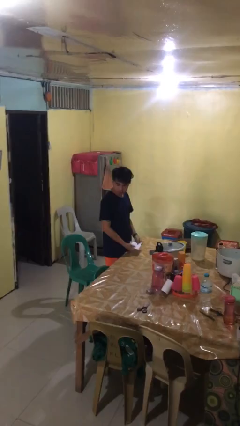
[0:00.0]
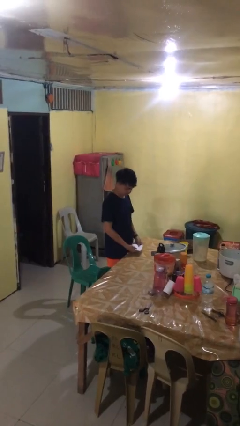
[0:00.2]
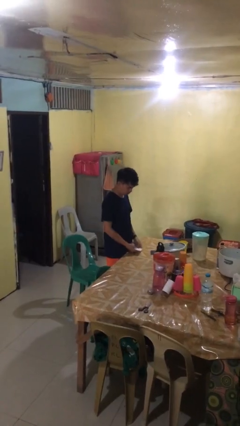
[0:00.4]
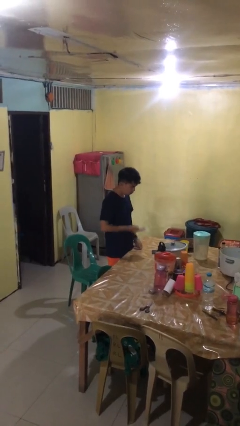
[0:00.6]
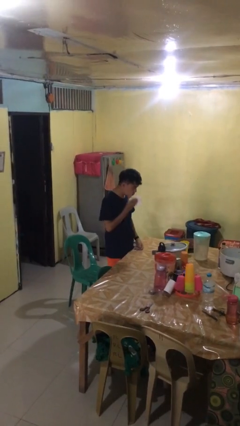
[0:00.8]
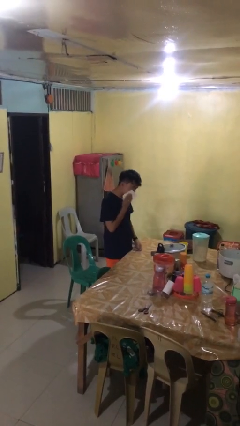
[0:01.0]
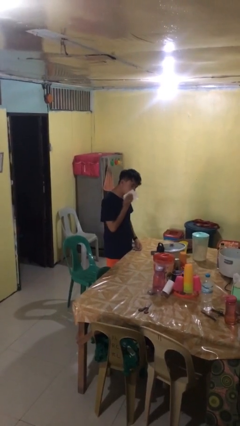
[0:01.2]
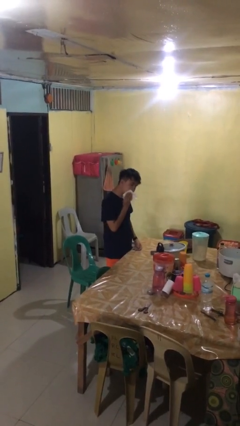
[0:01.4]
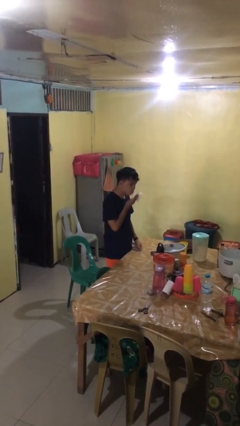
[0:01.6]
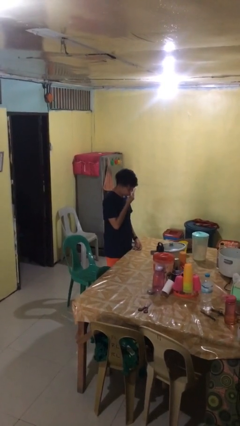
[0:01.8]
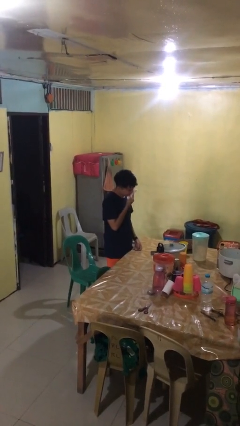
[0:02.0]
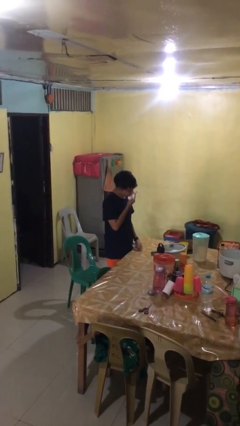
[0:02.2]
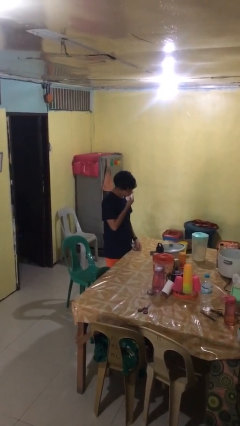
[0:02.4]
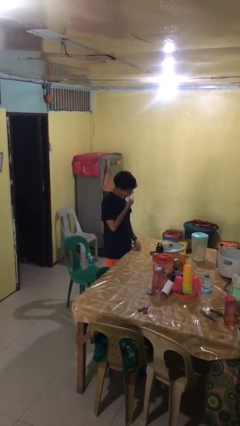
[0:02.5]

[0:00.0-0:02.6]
person wipes mouth with napkin

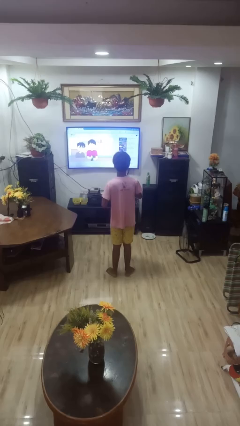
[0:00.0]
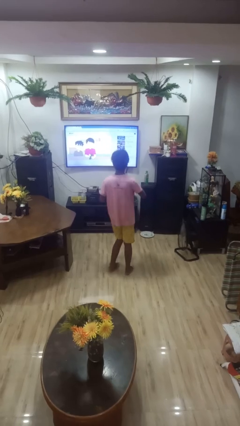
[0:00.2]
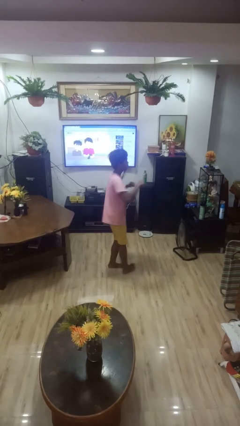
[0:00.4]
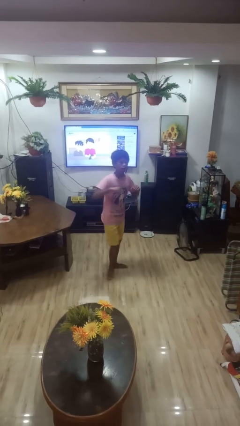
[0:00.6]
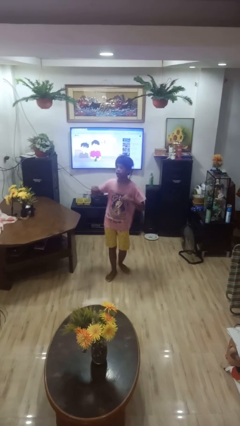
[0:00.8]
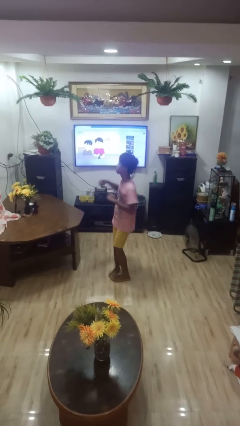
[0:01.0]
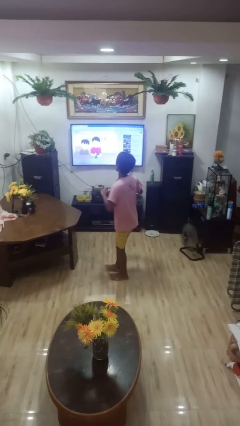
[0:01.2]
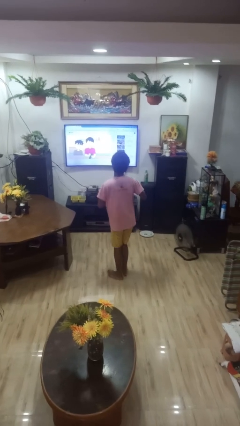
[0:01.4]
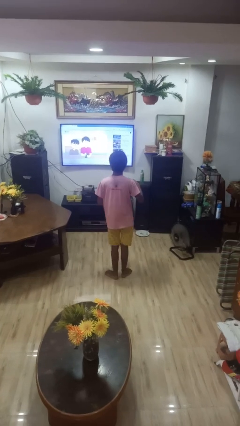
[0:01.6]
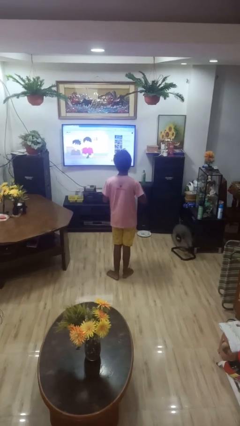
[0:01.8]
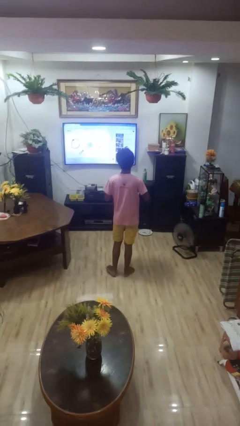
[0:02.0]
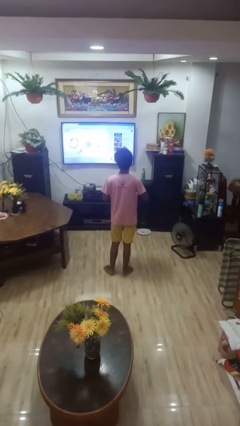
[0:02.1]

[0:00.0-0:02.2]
person twirls

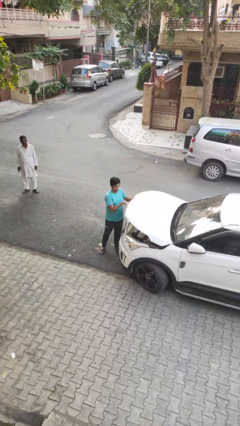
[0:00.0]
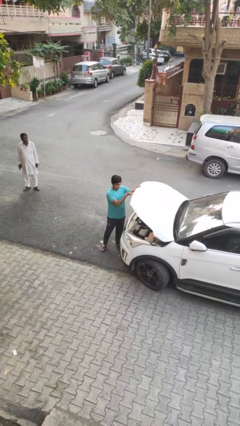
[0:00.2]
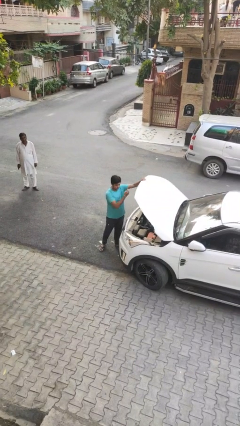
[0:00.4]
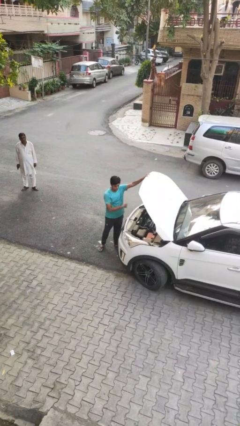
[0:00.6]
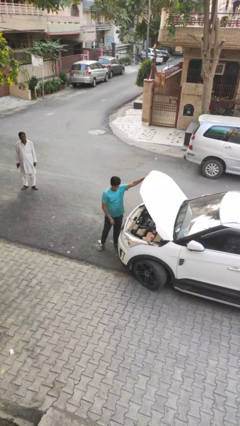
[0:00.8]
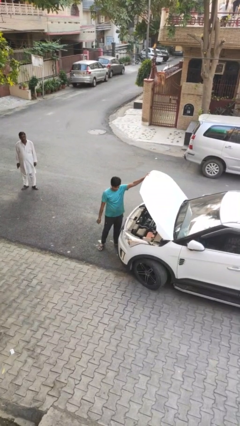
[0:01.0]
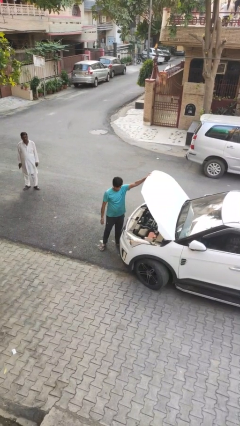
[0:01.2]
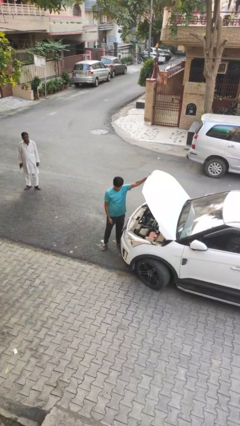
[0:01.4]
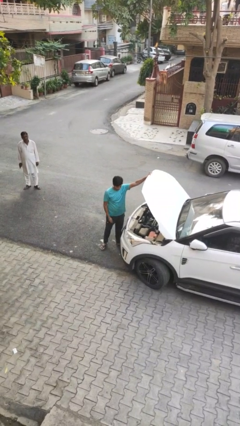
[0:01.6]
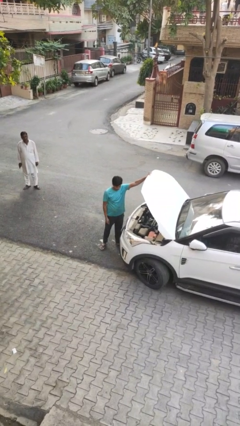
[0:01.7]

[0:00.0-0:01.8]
person opens car hood

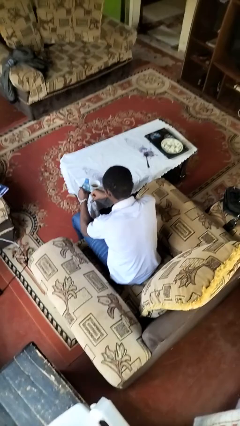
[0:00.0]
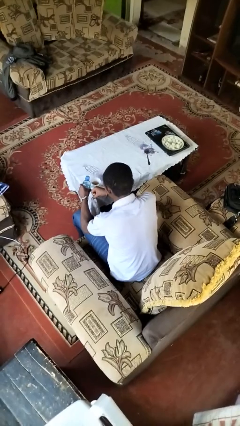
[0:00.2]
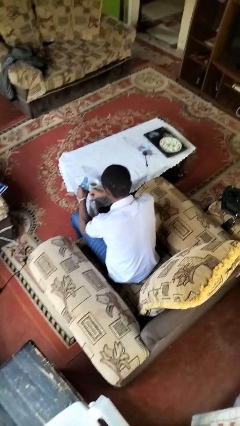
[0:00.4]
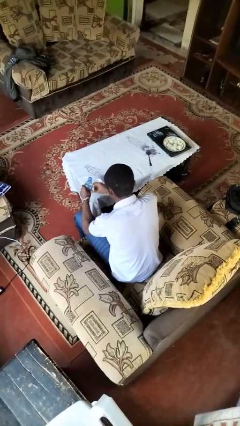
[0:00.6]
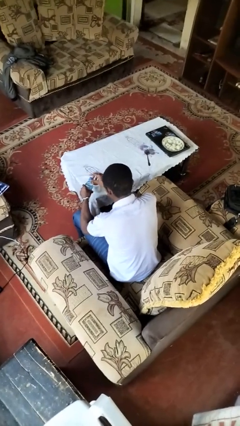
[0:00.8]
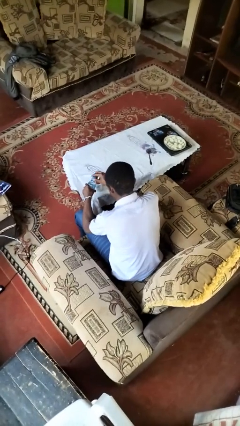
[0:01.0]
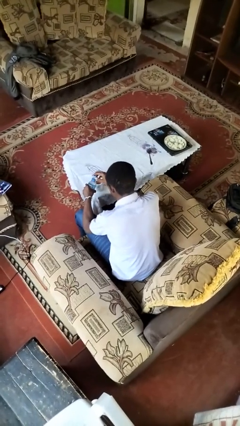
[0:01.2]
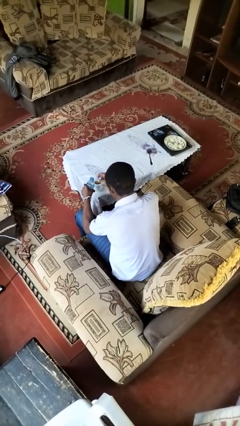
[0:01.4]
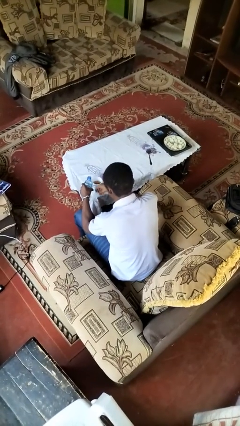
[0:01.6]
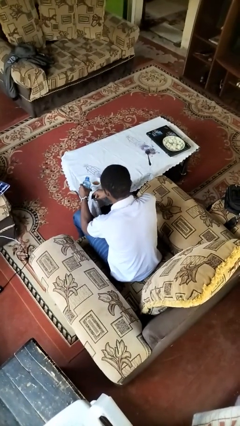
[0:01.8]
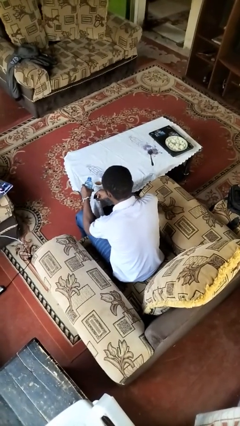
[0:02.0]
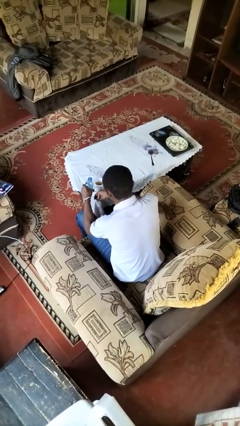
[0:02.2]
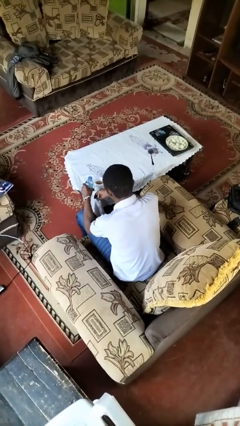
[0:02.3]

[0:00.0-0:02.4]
person unscrews lid from bottle

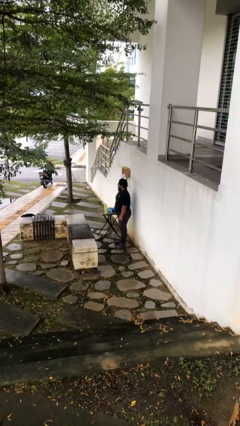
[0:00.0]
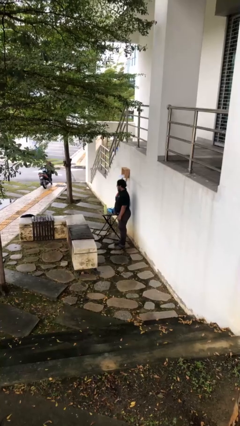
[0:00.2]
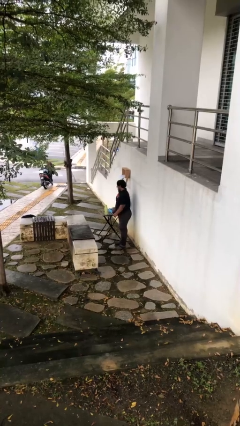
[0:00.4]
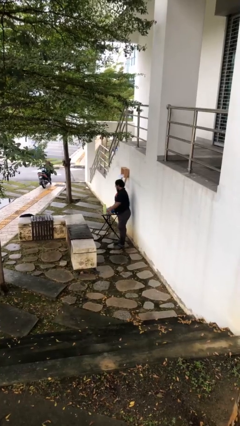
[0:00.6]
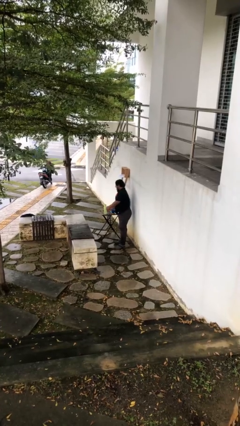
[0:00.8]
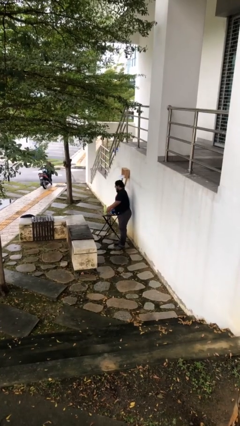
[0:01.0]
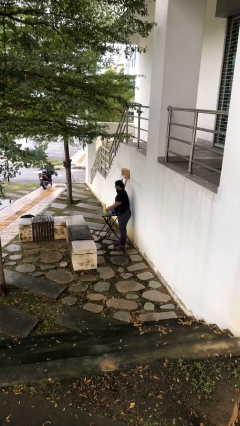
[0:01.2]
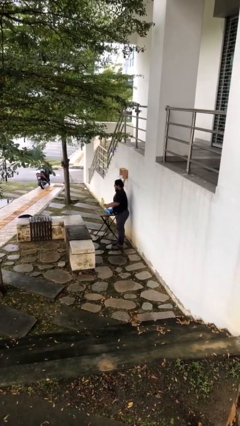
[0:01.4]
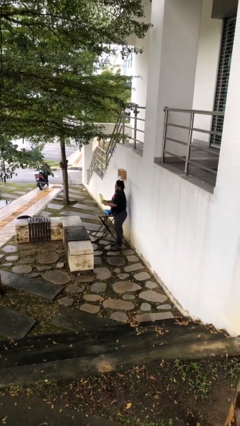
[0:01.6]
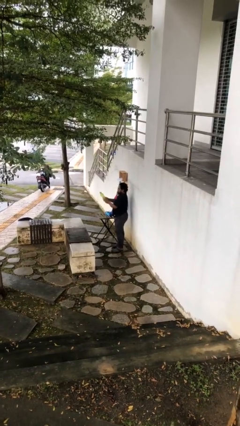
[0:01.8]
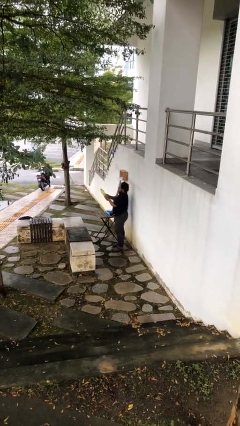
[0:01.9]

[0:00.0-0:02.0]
person picks up object from table

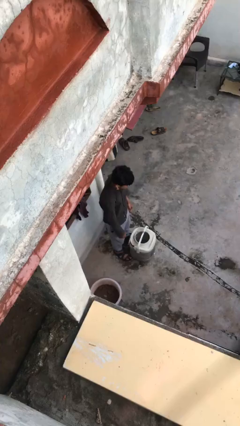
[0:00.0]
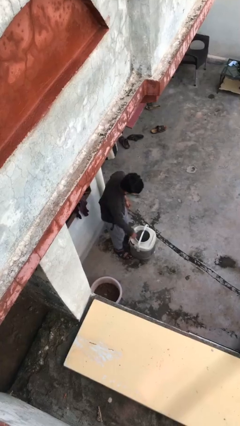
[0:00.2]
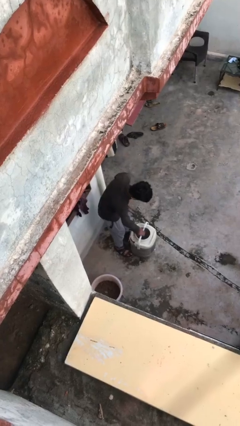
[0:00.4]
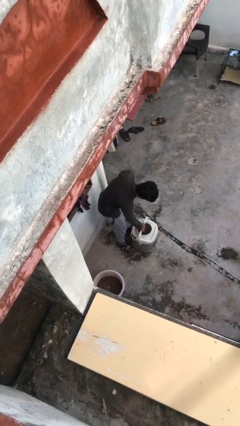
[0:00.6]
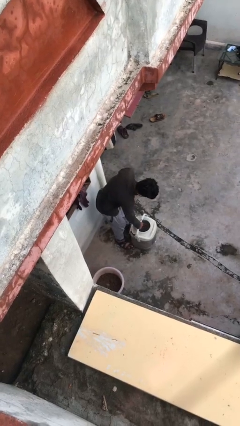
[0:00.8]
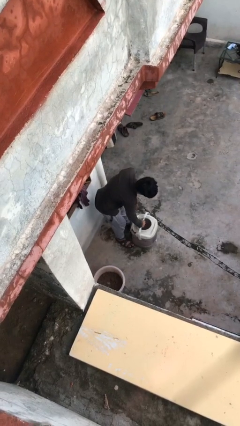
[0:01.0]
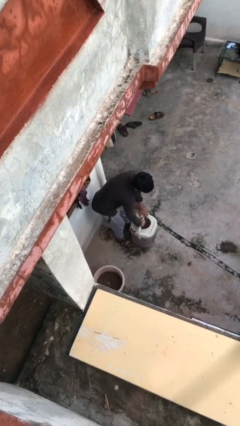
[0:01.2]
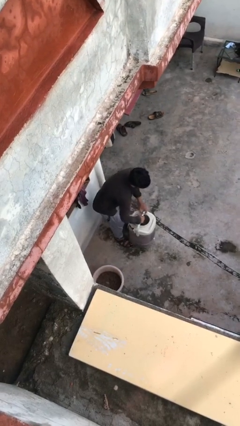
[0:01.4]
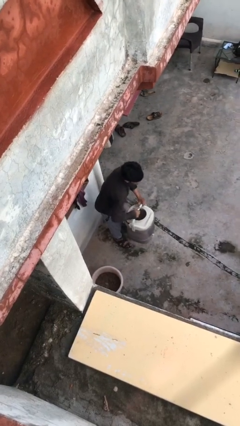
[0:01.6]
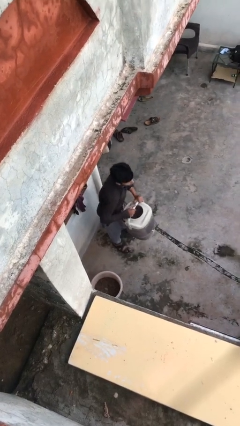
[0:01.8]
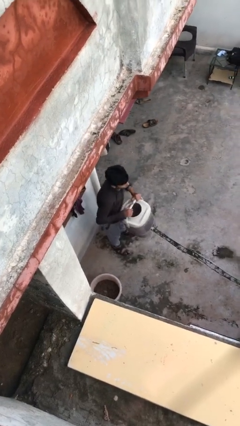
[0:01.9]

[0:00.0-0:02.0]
person picks up object from floor

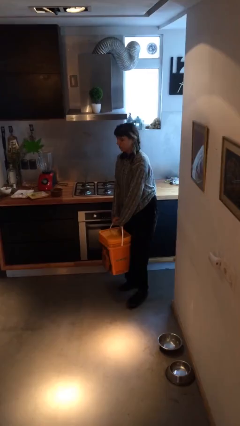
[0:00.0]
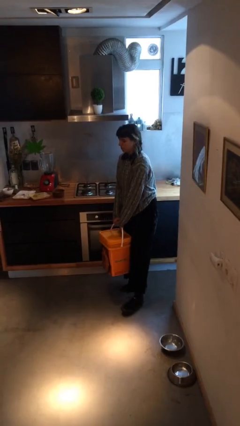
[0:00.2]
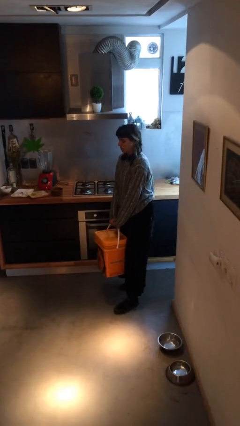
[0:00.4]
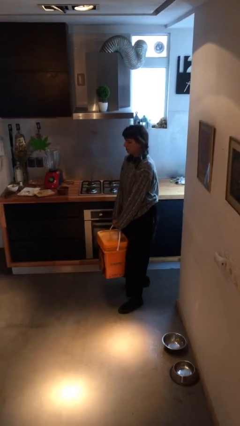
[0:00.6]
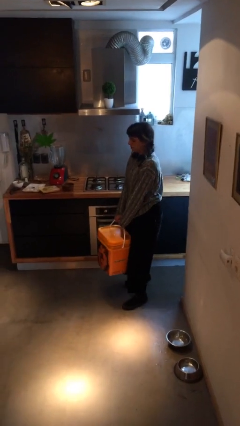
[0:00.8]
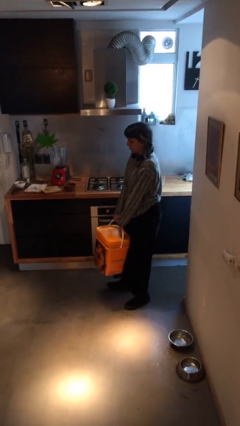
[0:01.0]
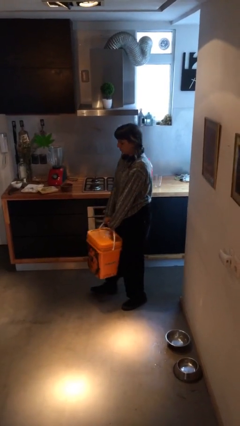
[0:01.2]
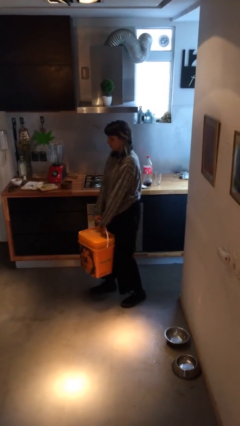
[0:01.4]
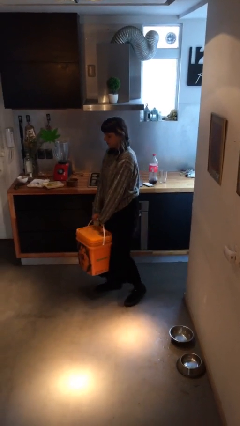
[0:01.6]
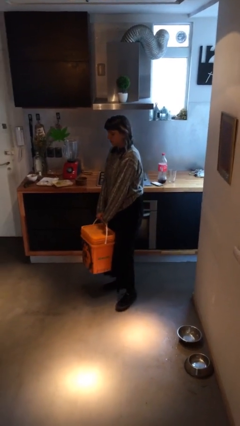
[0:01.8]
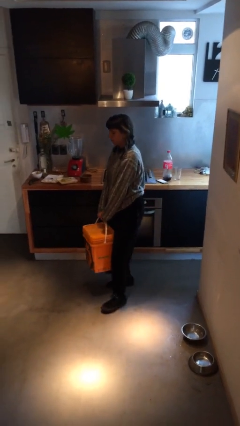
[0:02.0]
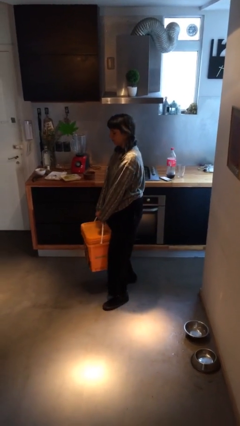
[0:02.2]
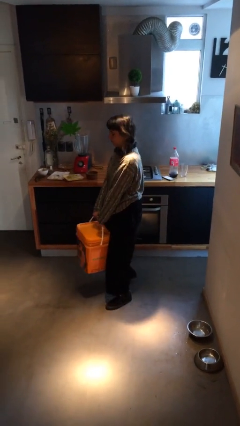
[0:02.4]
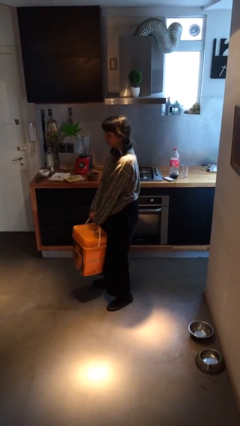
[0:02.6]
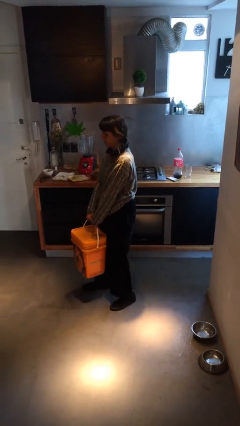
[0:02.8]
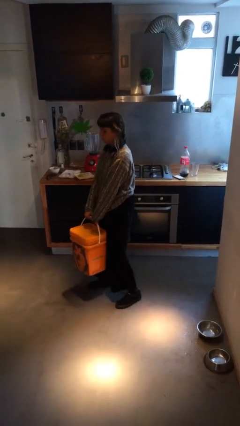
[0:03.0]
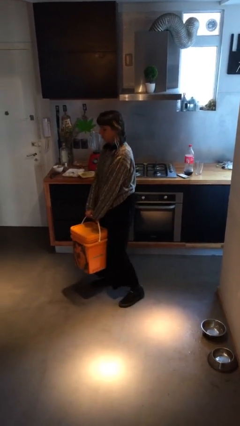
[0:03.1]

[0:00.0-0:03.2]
person carries heavy object

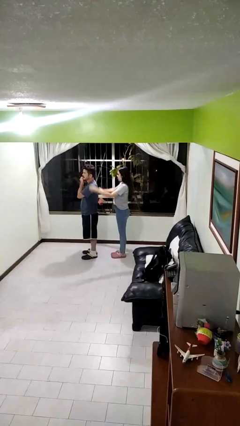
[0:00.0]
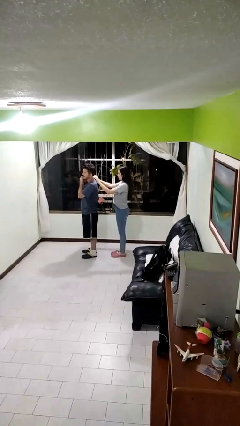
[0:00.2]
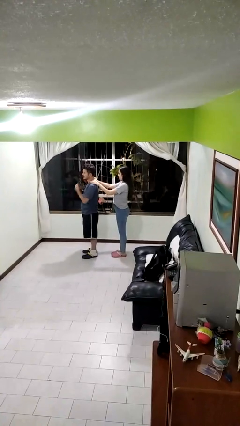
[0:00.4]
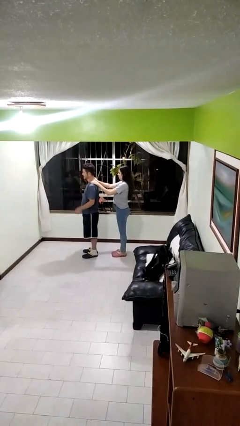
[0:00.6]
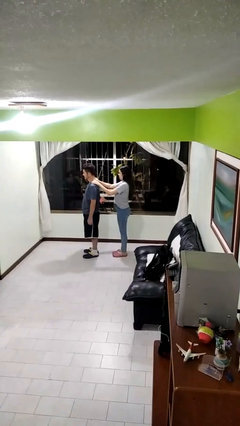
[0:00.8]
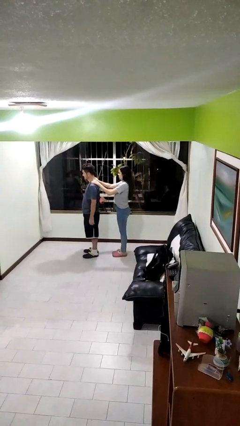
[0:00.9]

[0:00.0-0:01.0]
person grabs person by shoulder

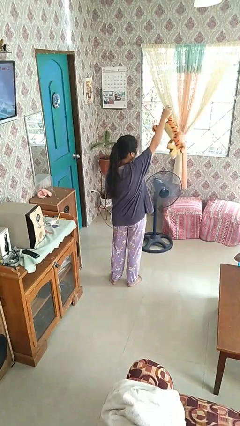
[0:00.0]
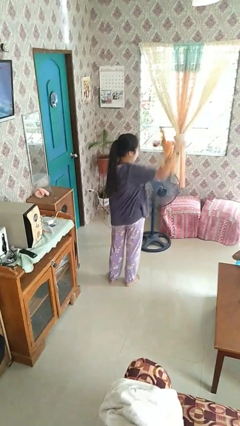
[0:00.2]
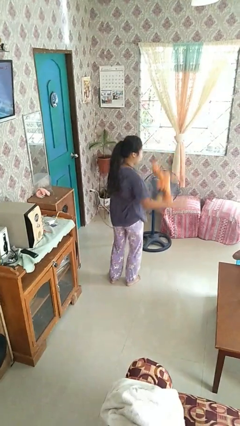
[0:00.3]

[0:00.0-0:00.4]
person drops object
